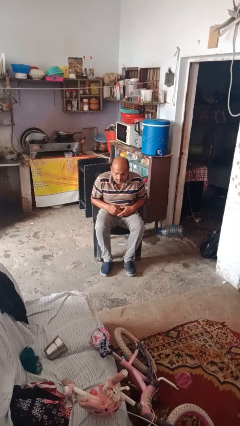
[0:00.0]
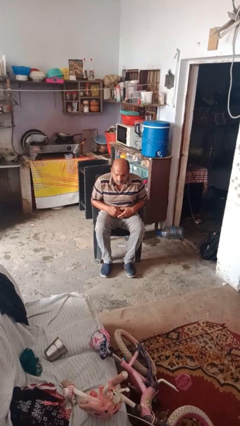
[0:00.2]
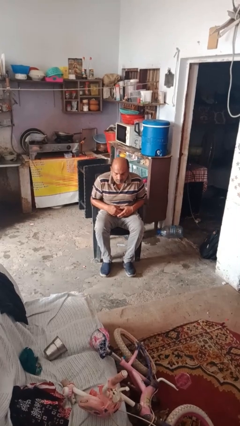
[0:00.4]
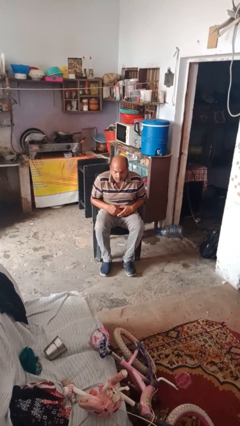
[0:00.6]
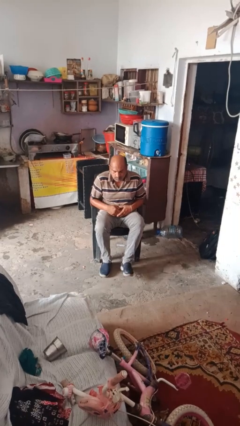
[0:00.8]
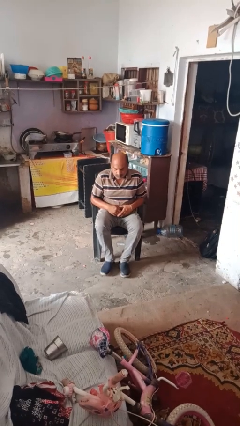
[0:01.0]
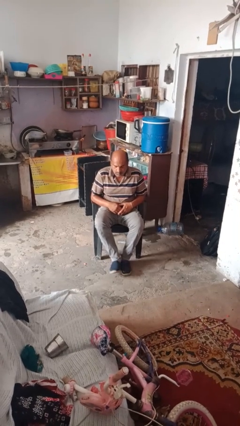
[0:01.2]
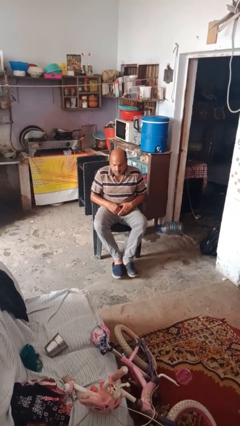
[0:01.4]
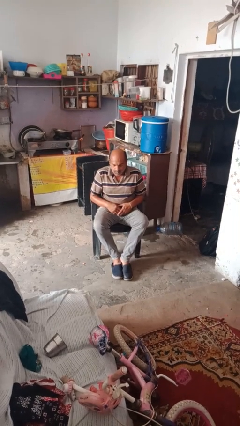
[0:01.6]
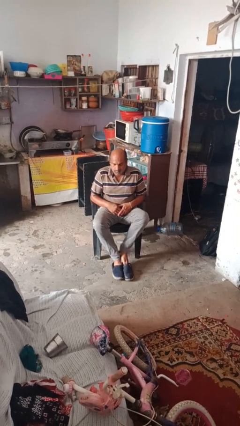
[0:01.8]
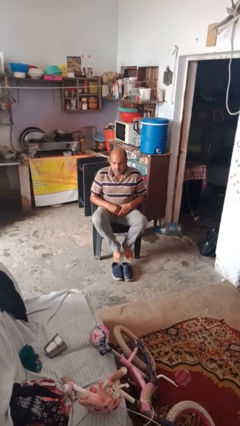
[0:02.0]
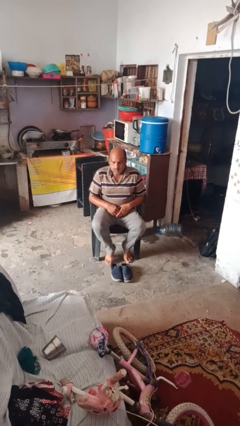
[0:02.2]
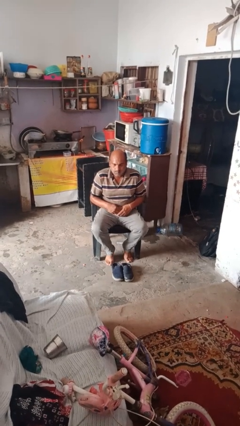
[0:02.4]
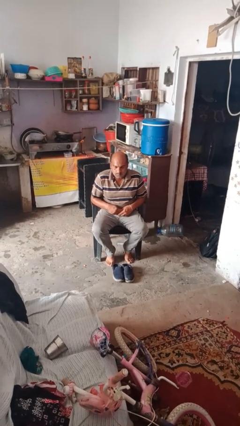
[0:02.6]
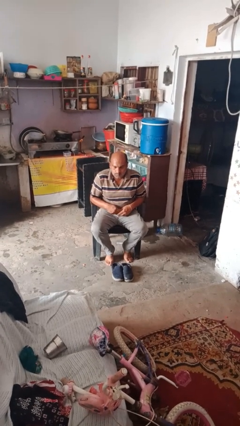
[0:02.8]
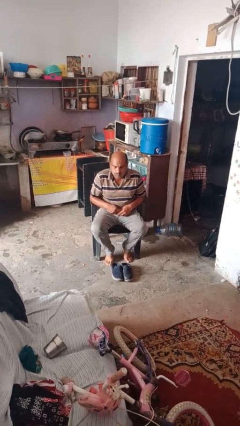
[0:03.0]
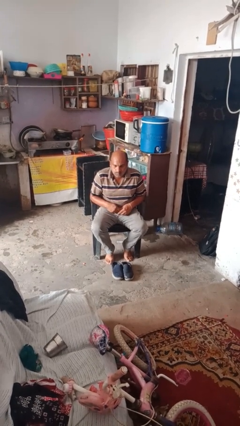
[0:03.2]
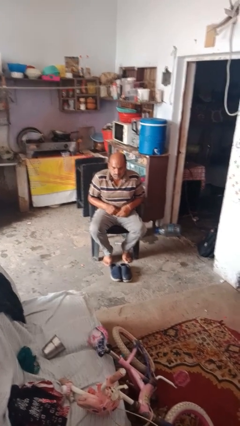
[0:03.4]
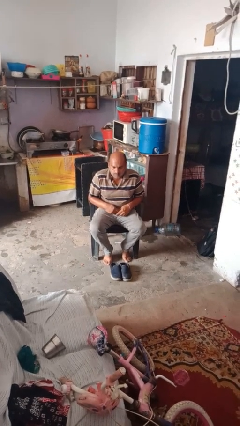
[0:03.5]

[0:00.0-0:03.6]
person takes off shoes

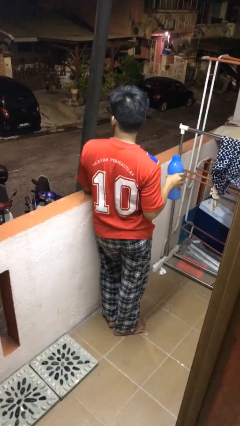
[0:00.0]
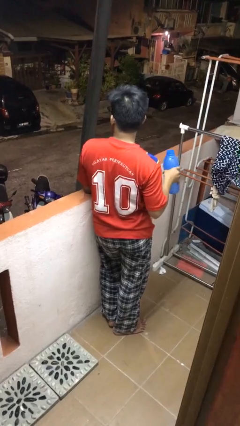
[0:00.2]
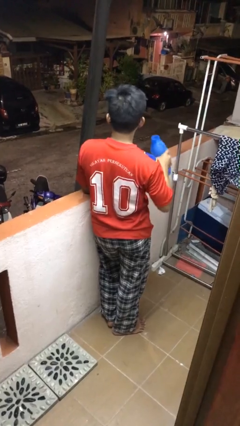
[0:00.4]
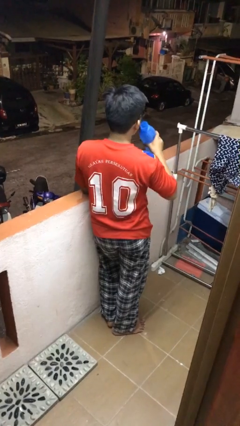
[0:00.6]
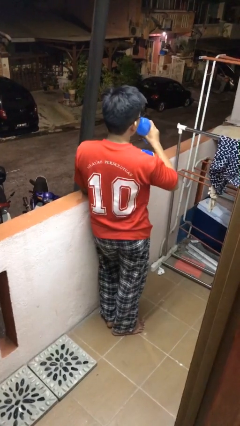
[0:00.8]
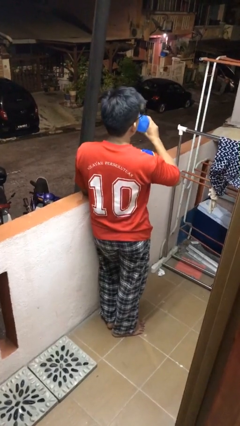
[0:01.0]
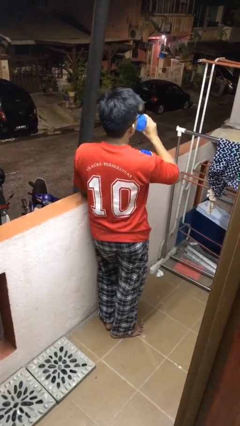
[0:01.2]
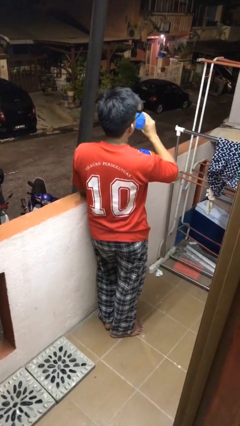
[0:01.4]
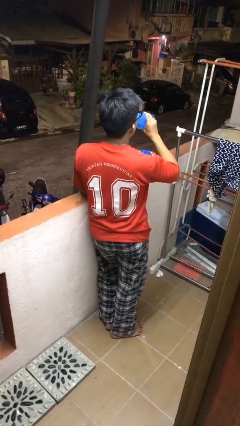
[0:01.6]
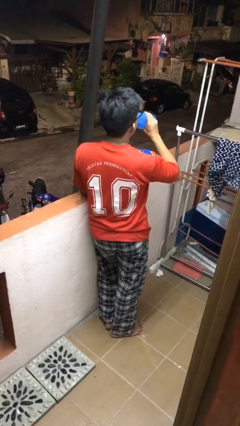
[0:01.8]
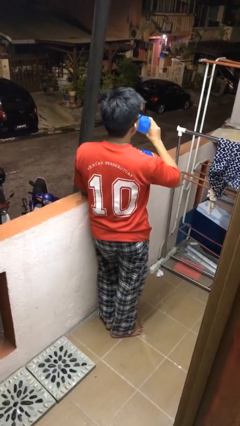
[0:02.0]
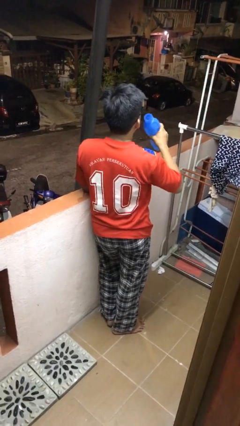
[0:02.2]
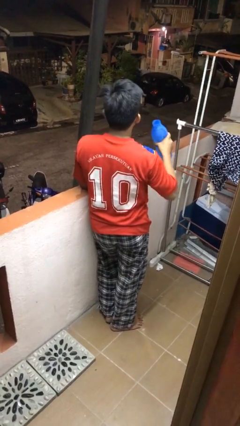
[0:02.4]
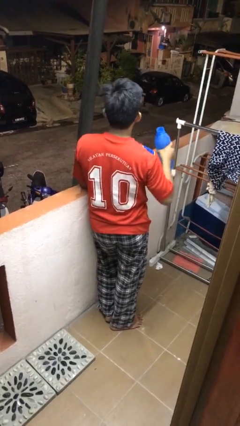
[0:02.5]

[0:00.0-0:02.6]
person drinks from bottle

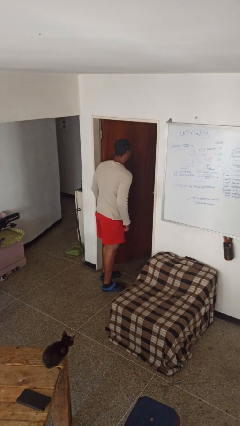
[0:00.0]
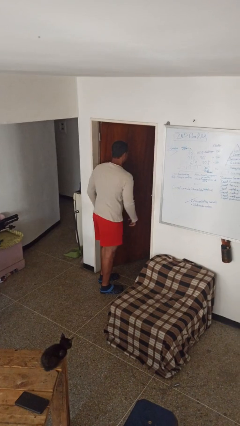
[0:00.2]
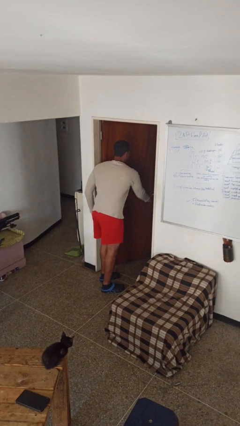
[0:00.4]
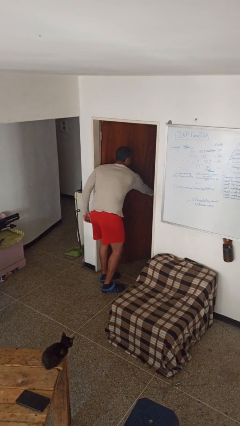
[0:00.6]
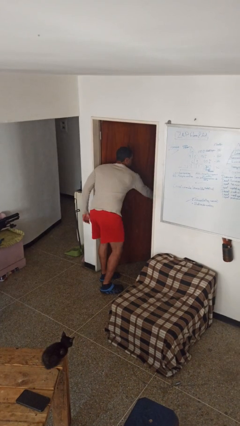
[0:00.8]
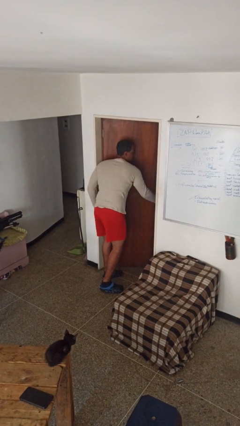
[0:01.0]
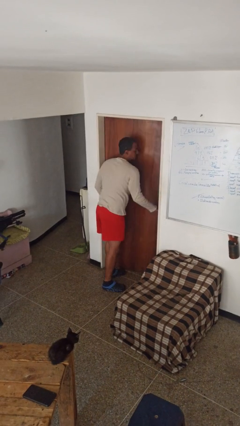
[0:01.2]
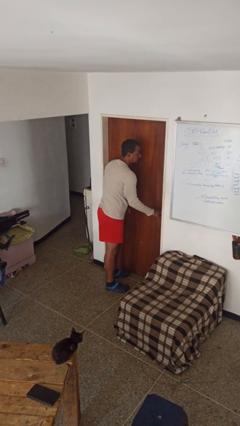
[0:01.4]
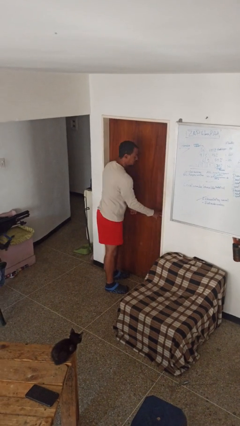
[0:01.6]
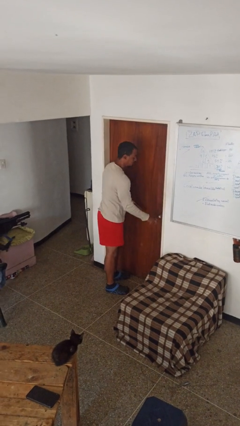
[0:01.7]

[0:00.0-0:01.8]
person closes facility door

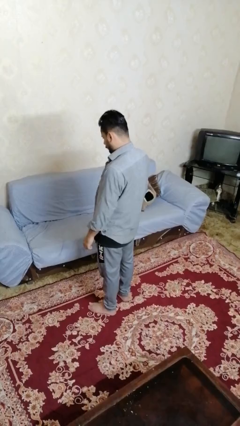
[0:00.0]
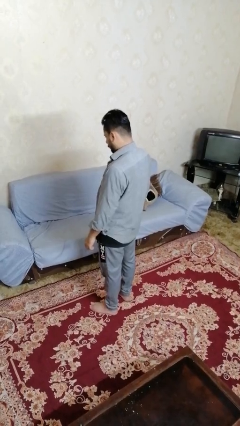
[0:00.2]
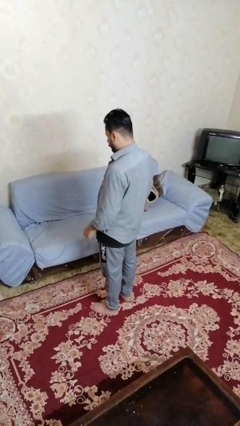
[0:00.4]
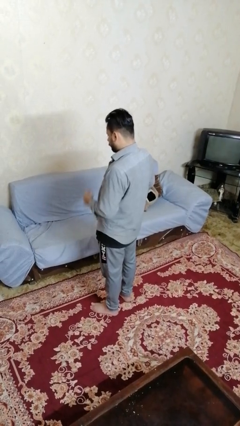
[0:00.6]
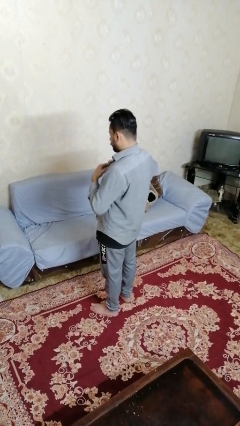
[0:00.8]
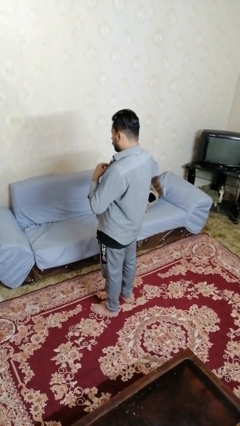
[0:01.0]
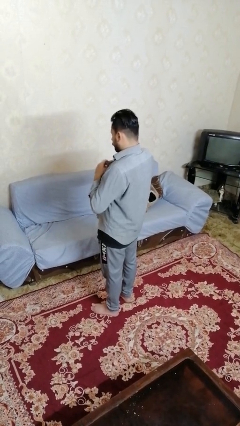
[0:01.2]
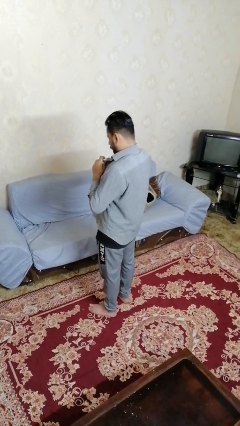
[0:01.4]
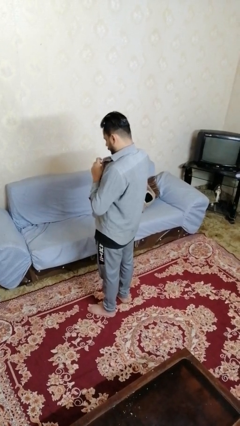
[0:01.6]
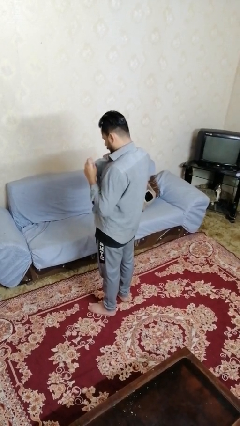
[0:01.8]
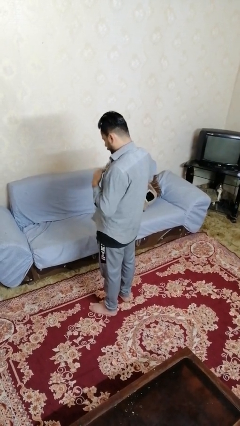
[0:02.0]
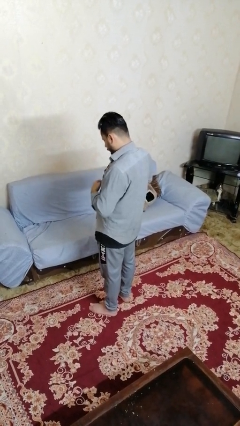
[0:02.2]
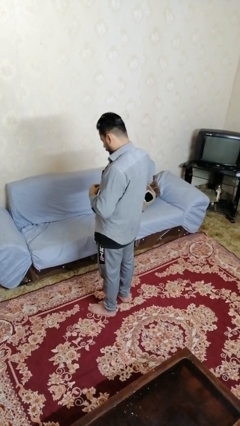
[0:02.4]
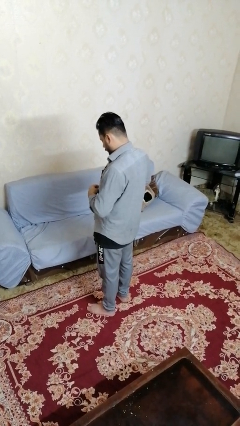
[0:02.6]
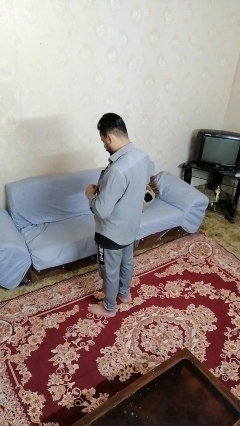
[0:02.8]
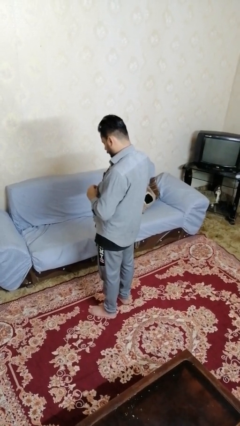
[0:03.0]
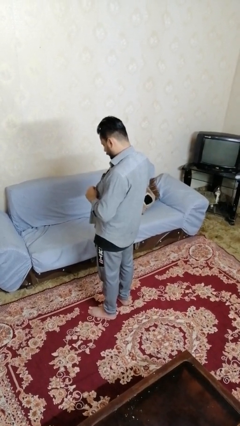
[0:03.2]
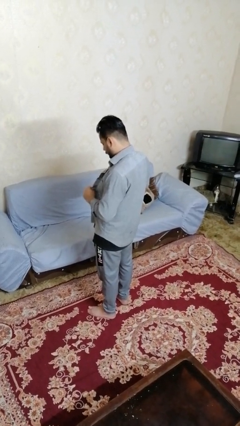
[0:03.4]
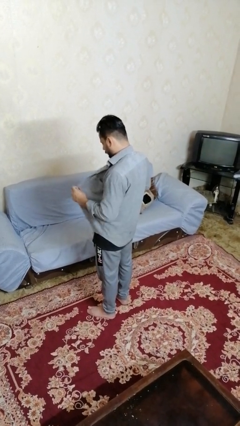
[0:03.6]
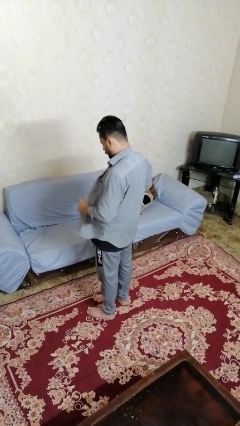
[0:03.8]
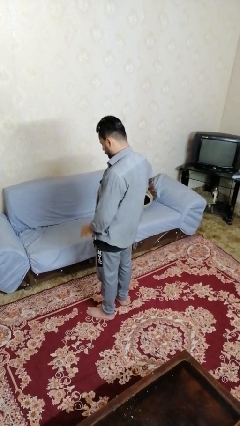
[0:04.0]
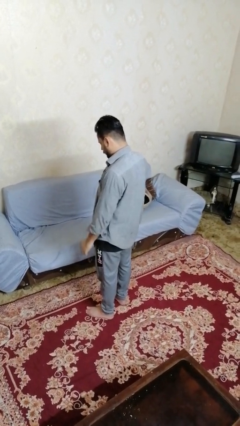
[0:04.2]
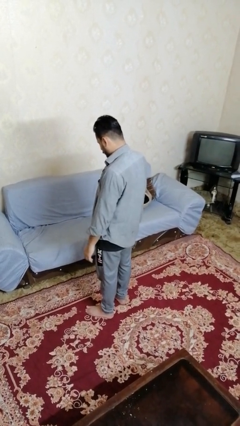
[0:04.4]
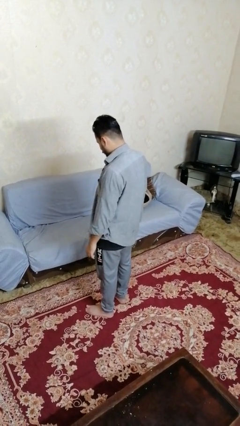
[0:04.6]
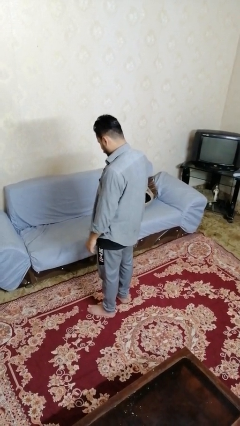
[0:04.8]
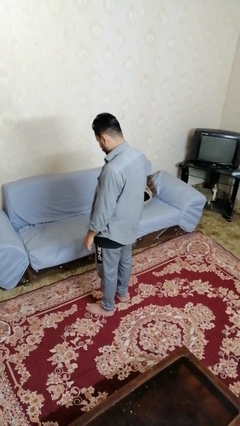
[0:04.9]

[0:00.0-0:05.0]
person unbuttons shirt

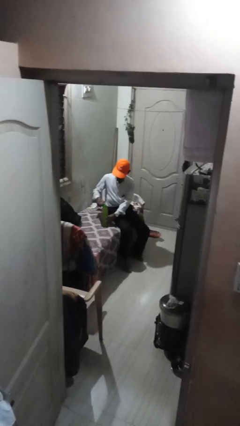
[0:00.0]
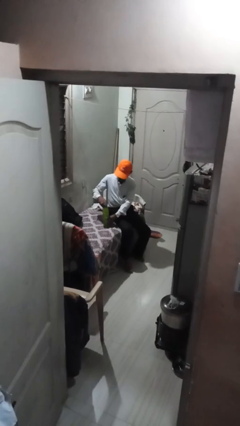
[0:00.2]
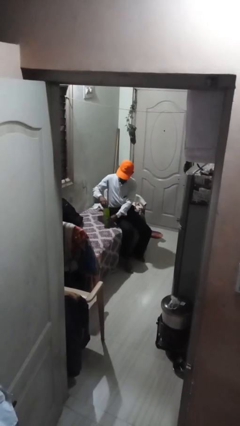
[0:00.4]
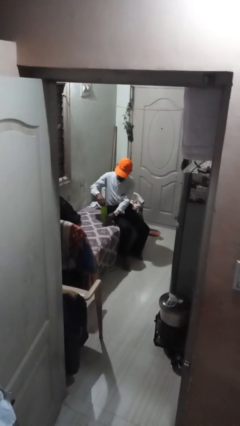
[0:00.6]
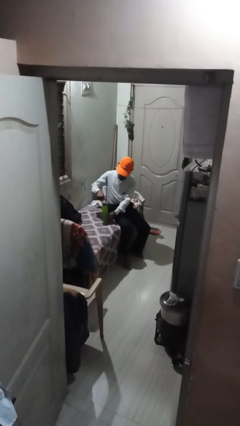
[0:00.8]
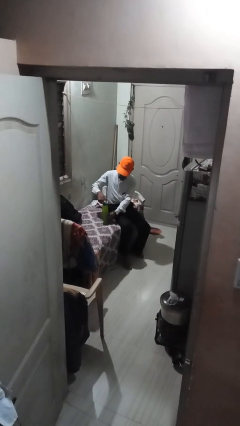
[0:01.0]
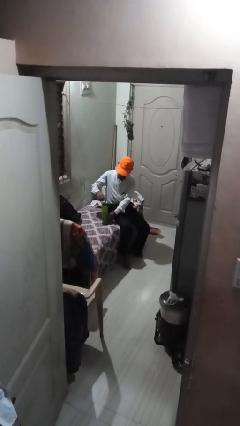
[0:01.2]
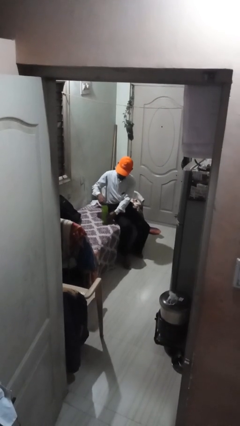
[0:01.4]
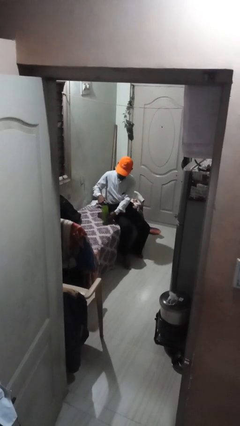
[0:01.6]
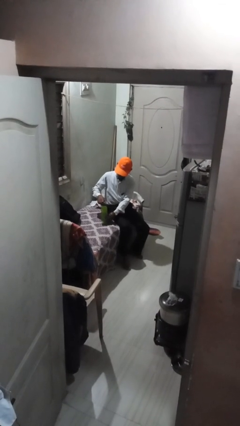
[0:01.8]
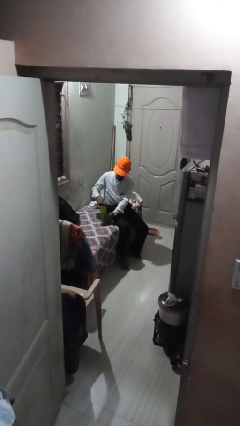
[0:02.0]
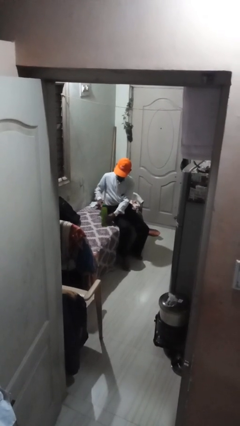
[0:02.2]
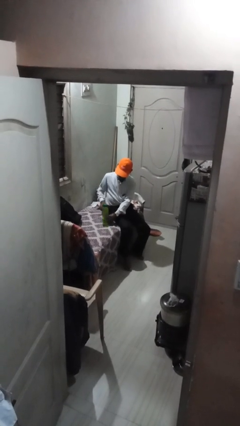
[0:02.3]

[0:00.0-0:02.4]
person screws lid to bottle

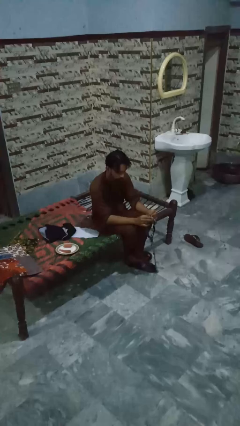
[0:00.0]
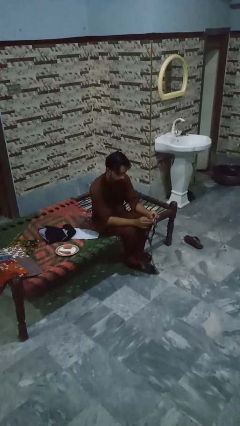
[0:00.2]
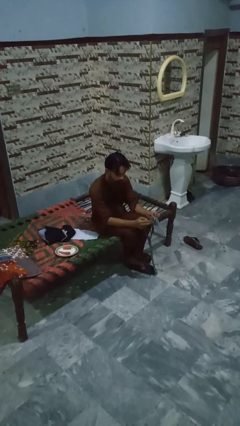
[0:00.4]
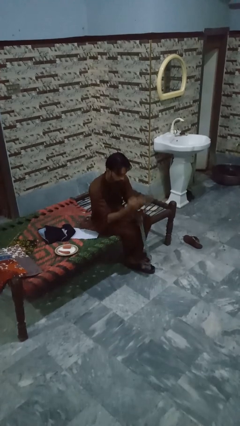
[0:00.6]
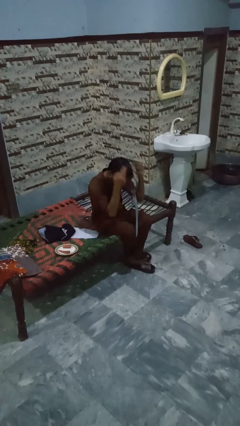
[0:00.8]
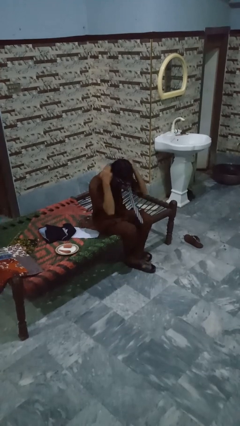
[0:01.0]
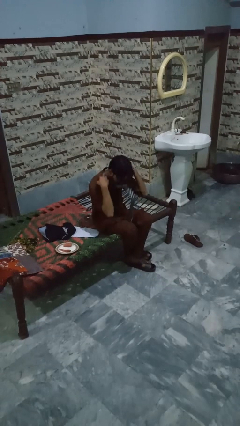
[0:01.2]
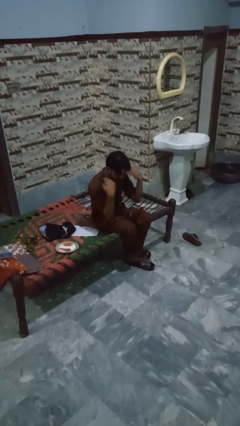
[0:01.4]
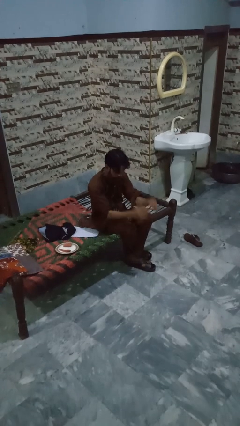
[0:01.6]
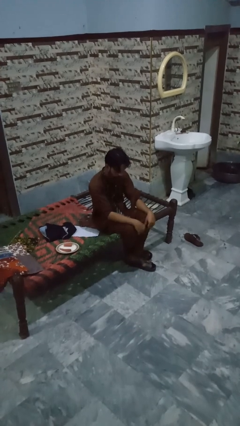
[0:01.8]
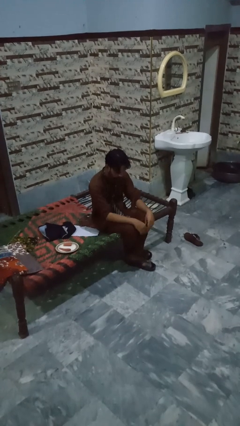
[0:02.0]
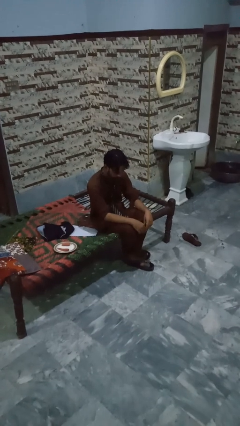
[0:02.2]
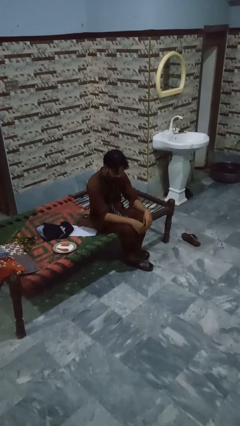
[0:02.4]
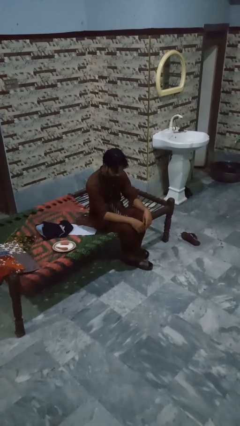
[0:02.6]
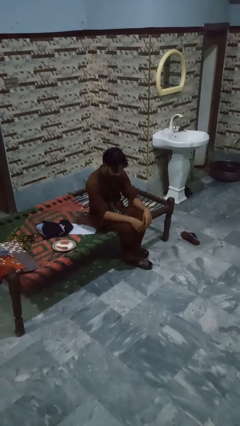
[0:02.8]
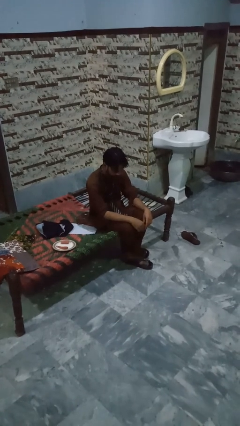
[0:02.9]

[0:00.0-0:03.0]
person puts on necktie
